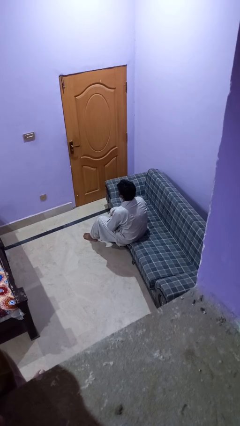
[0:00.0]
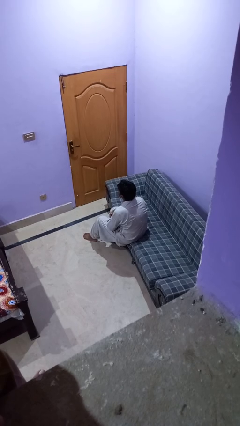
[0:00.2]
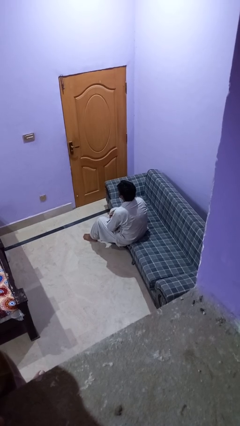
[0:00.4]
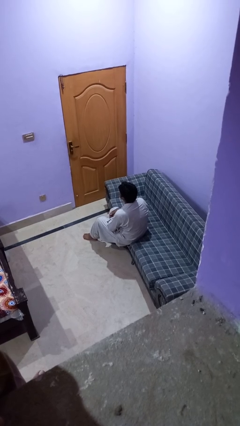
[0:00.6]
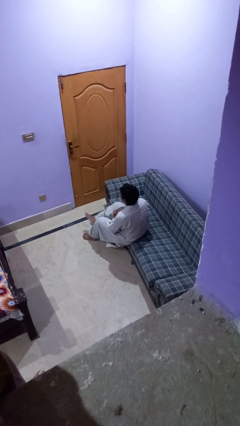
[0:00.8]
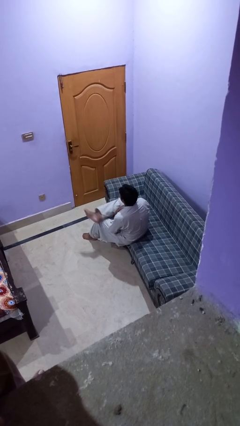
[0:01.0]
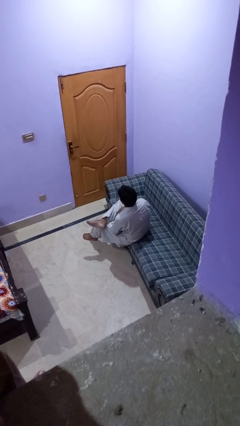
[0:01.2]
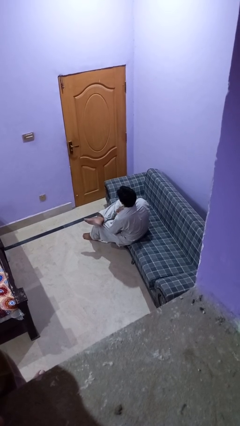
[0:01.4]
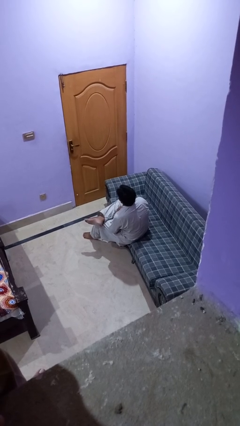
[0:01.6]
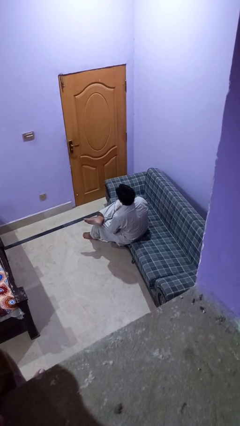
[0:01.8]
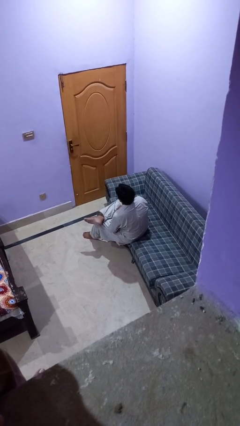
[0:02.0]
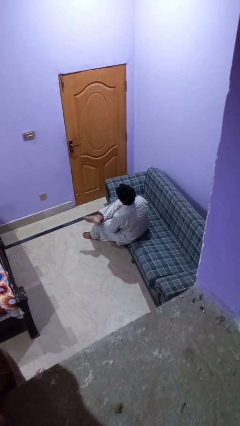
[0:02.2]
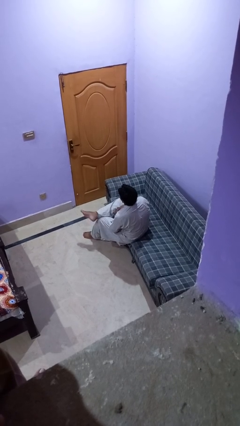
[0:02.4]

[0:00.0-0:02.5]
person crosses legs

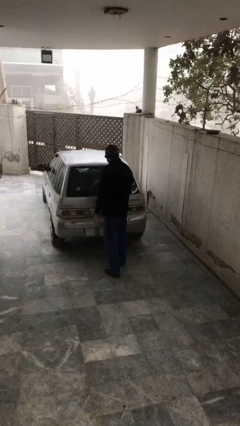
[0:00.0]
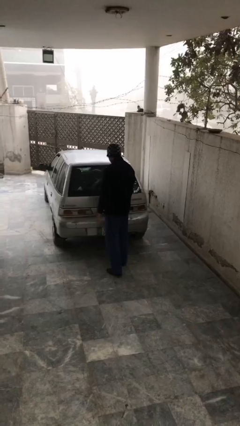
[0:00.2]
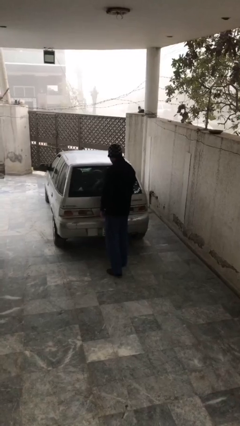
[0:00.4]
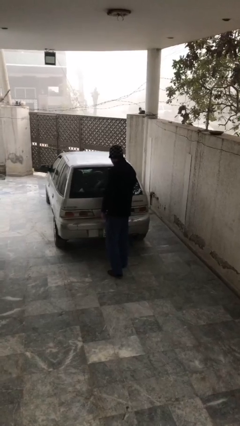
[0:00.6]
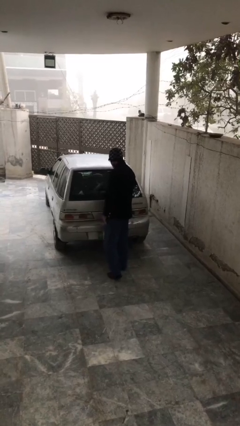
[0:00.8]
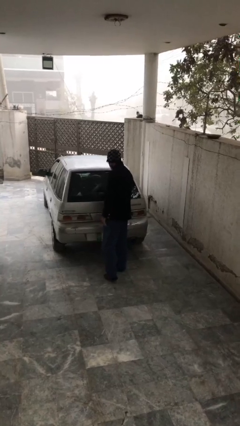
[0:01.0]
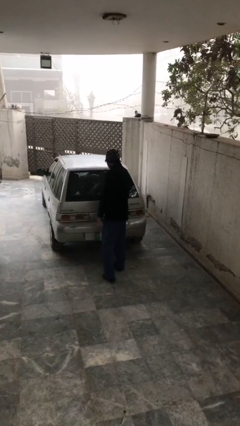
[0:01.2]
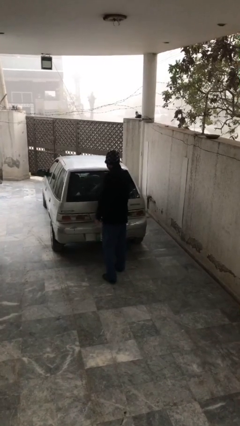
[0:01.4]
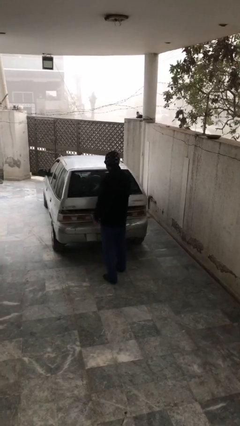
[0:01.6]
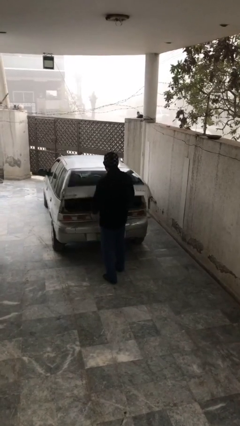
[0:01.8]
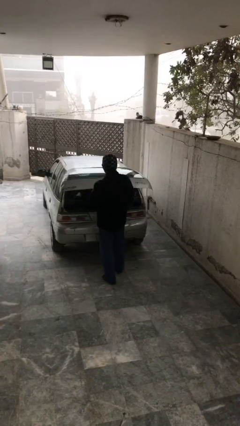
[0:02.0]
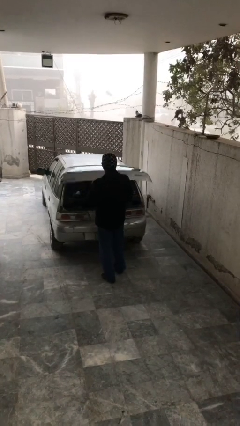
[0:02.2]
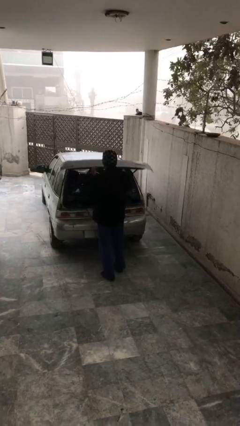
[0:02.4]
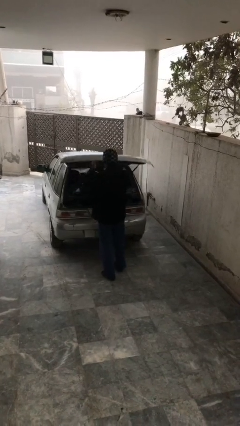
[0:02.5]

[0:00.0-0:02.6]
person opens car trunk

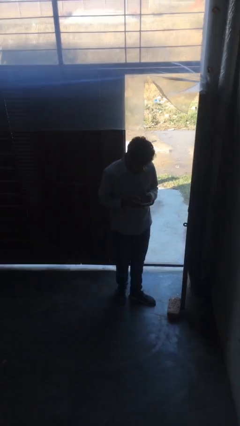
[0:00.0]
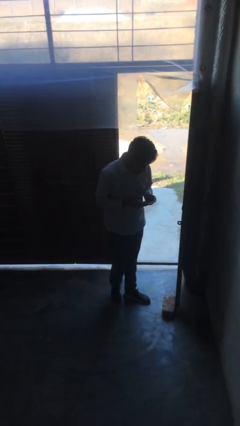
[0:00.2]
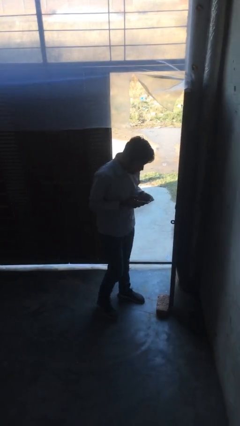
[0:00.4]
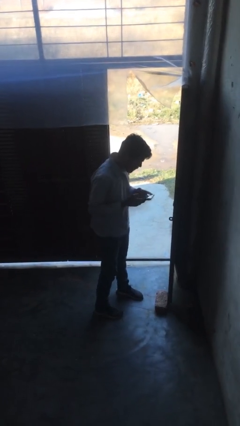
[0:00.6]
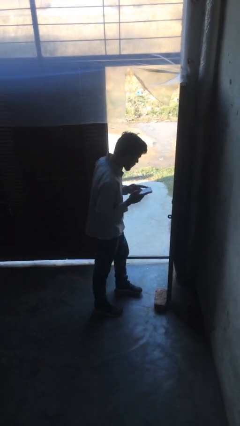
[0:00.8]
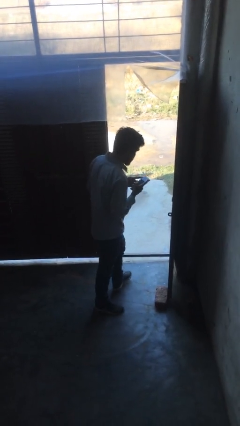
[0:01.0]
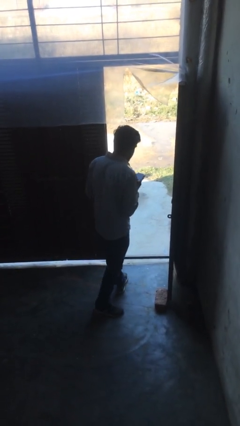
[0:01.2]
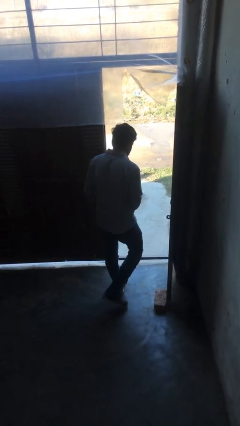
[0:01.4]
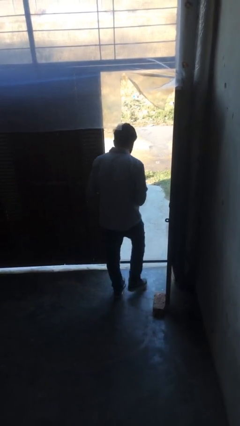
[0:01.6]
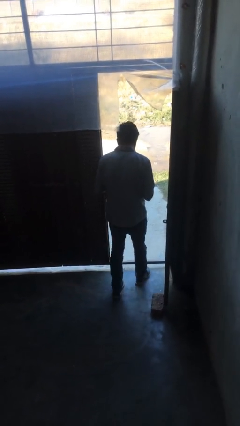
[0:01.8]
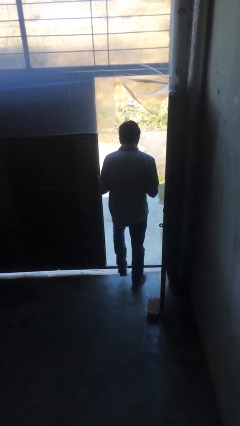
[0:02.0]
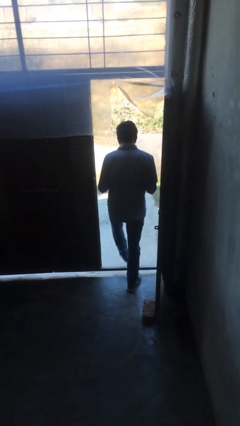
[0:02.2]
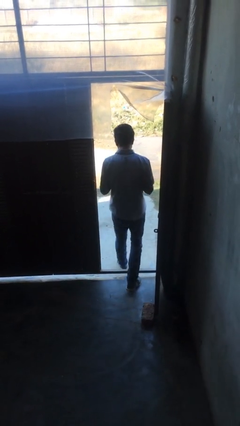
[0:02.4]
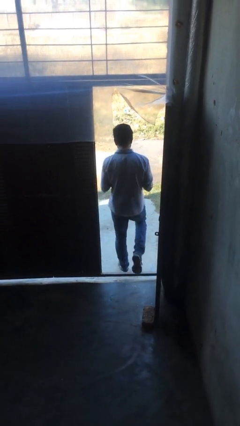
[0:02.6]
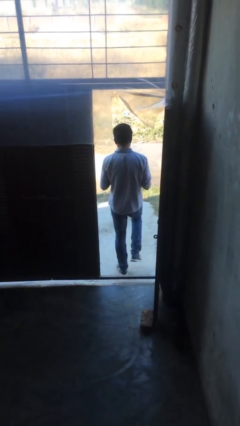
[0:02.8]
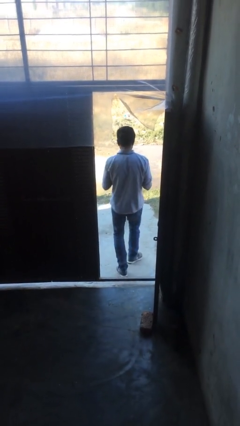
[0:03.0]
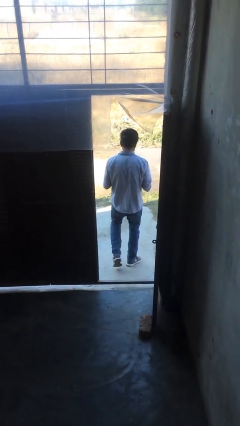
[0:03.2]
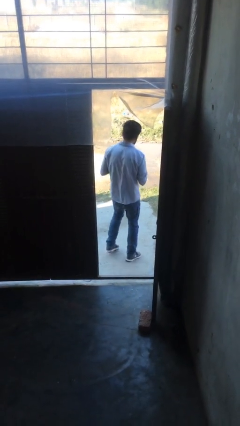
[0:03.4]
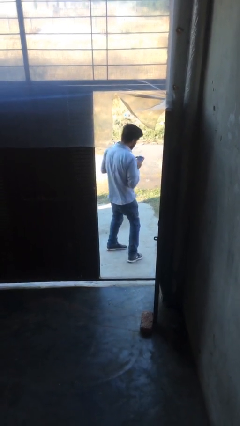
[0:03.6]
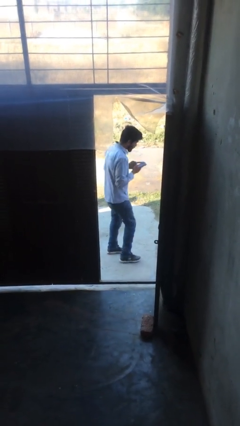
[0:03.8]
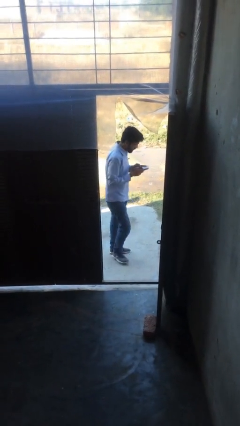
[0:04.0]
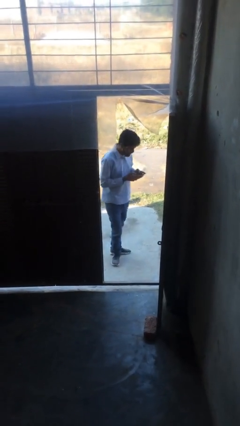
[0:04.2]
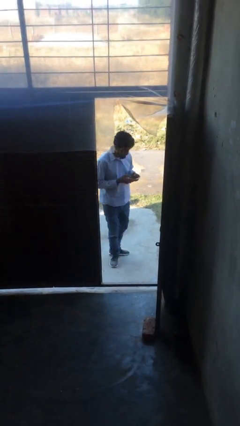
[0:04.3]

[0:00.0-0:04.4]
person exits scene through structure

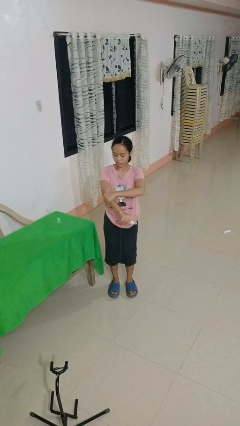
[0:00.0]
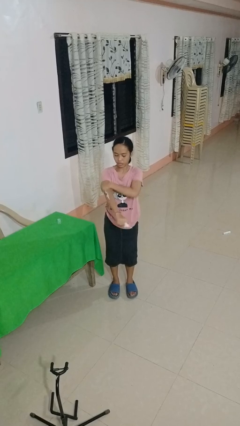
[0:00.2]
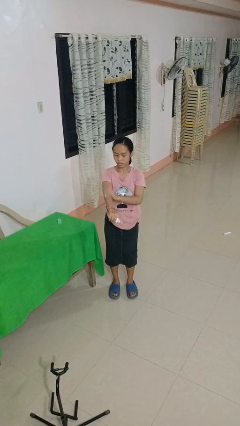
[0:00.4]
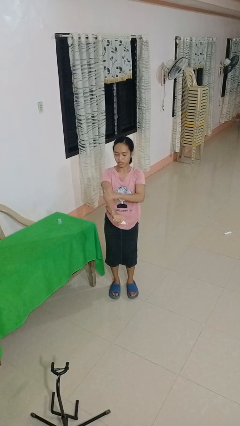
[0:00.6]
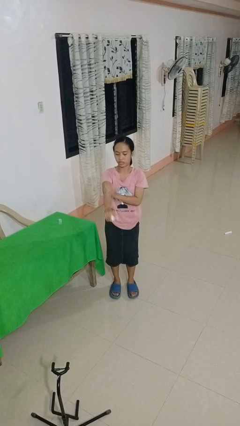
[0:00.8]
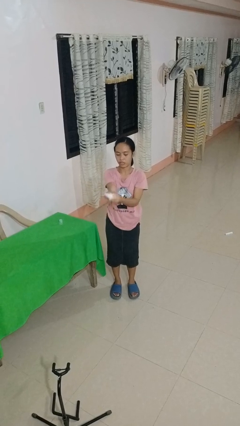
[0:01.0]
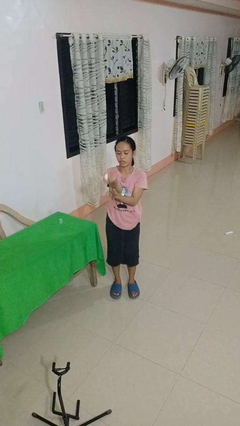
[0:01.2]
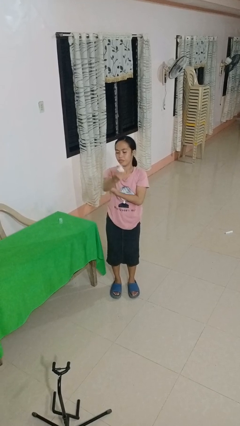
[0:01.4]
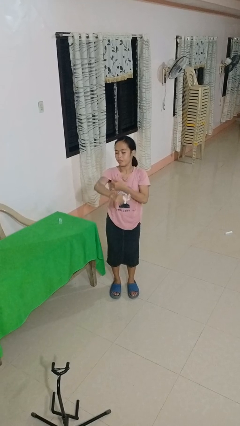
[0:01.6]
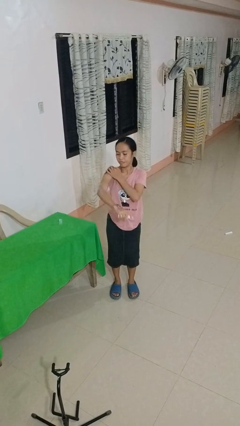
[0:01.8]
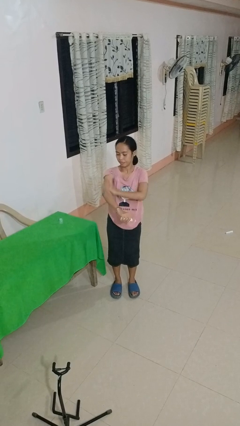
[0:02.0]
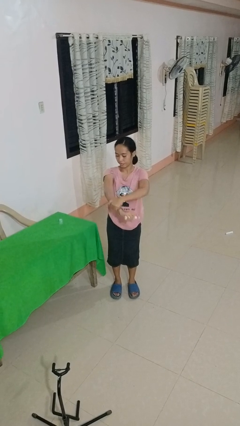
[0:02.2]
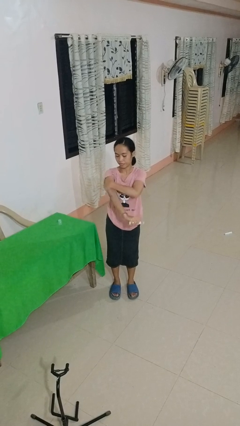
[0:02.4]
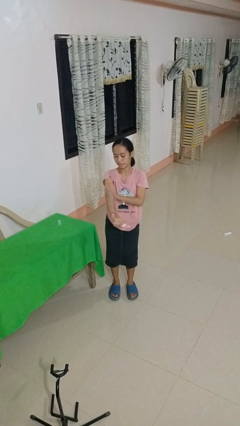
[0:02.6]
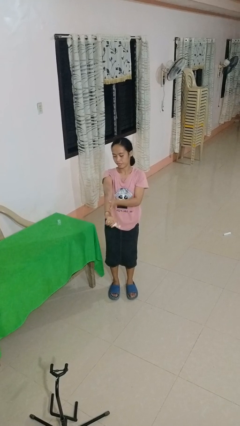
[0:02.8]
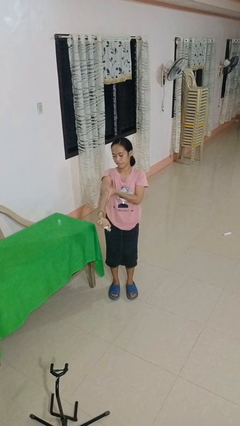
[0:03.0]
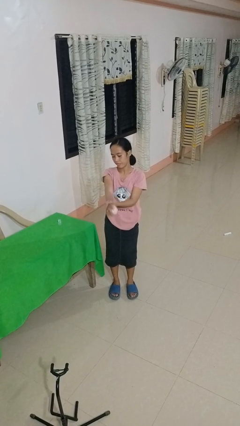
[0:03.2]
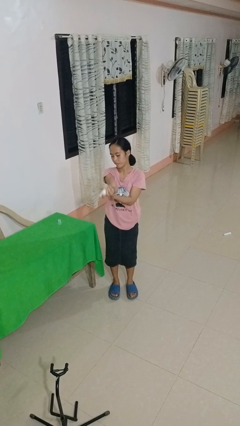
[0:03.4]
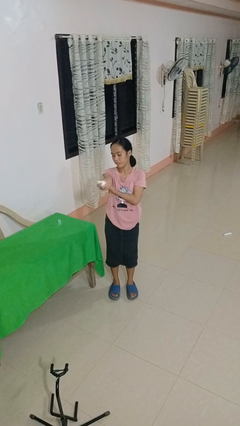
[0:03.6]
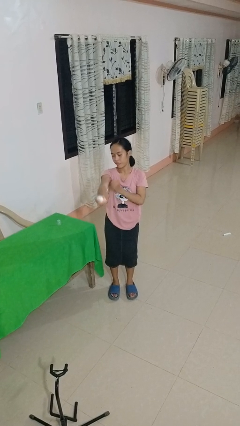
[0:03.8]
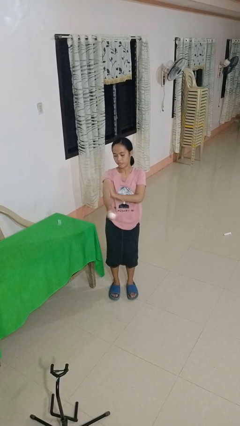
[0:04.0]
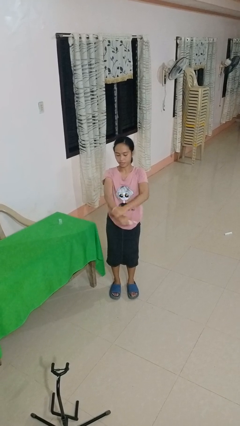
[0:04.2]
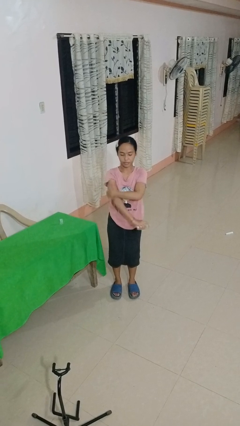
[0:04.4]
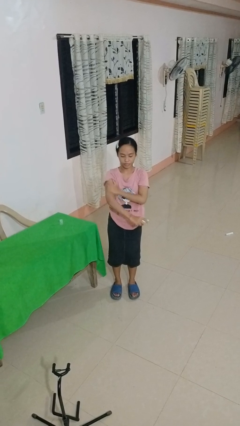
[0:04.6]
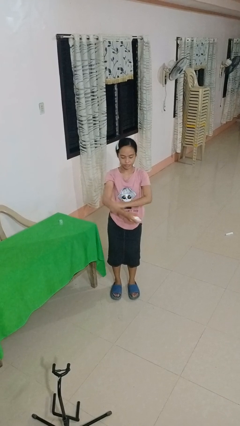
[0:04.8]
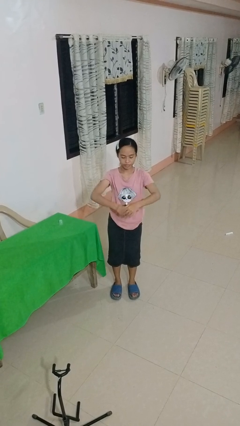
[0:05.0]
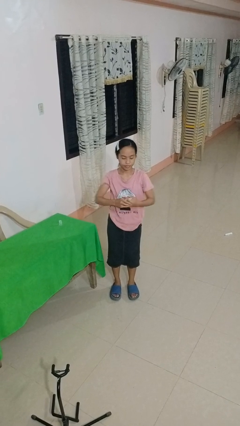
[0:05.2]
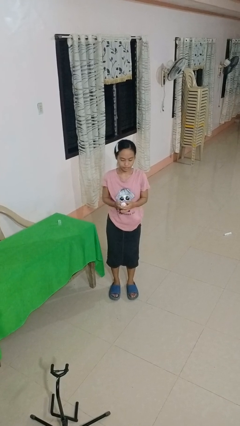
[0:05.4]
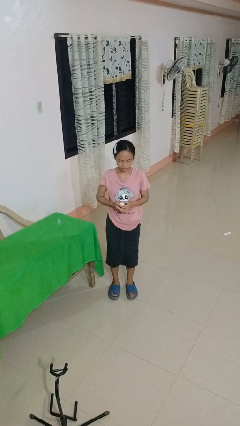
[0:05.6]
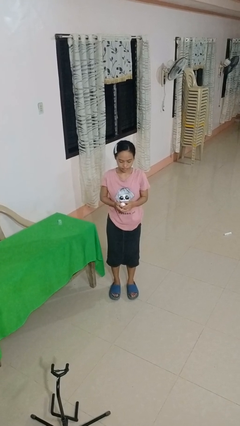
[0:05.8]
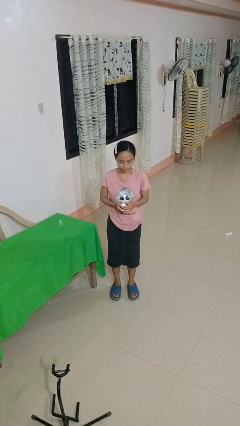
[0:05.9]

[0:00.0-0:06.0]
person applies sunscreen

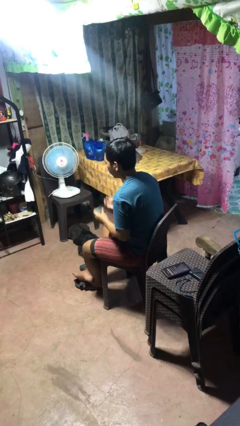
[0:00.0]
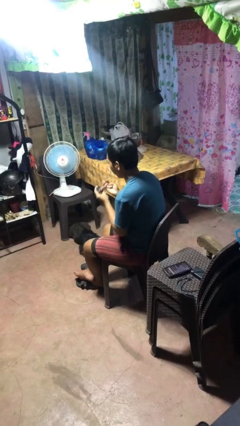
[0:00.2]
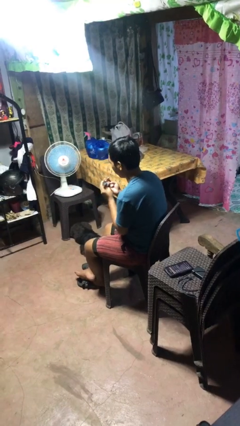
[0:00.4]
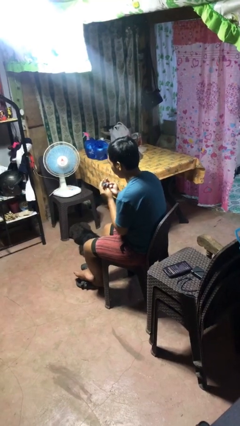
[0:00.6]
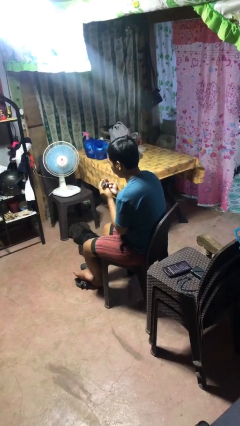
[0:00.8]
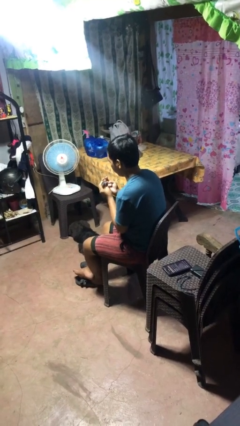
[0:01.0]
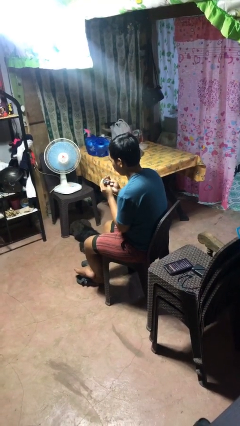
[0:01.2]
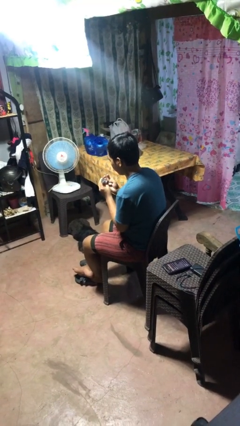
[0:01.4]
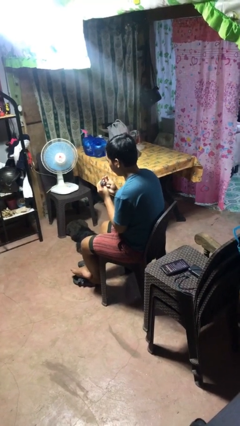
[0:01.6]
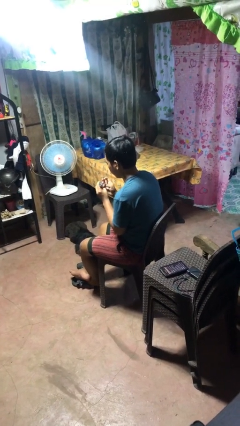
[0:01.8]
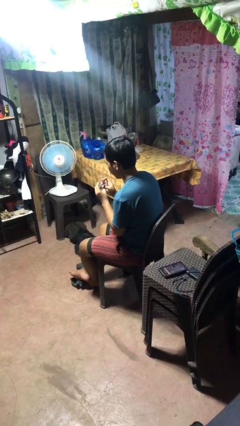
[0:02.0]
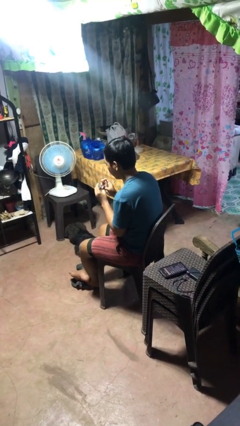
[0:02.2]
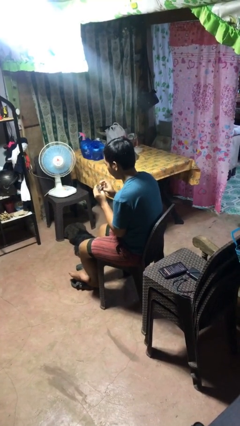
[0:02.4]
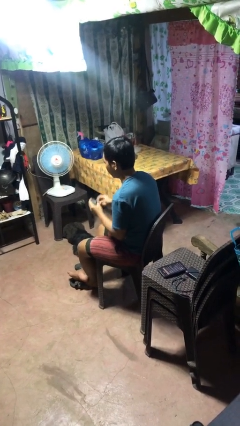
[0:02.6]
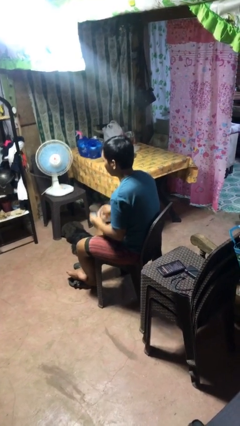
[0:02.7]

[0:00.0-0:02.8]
person clips fingernails
